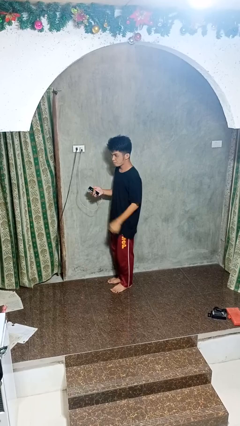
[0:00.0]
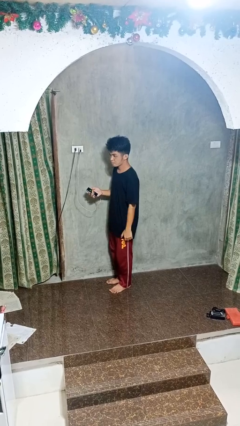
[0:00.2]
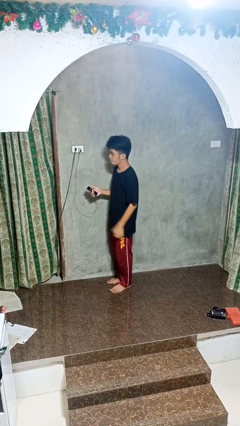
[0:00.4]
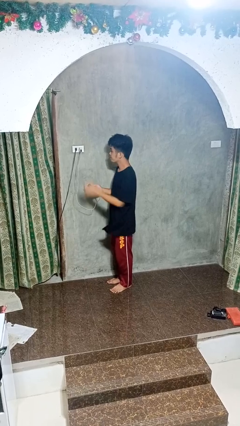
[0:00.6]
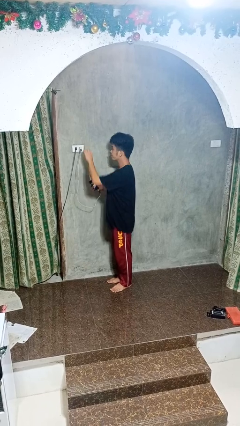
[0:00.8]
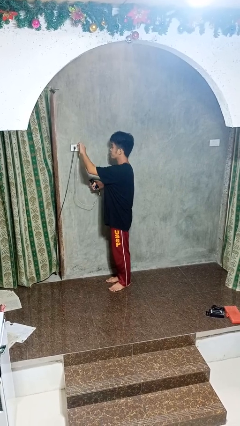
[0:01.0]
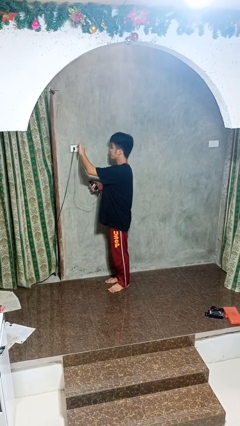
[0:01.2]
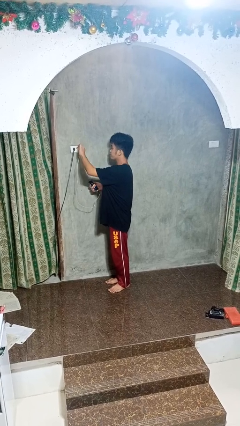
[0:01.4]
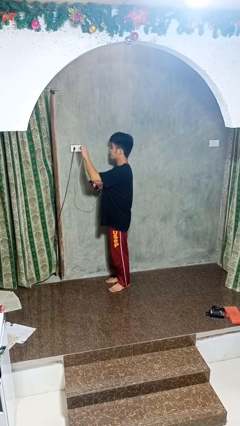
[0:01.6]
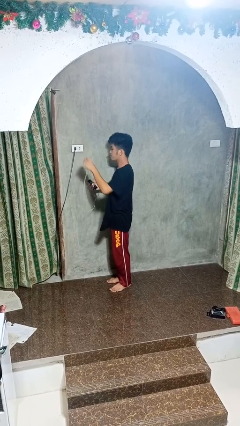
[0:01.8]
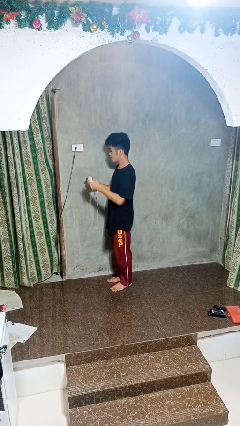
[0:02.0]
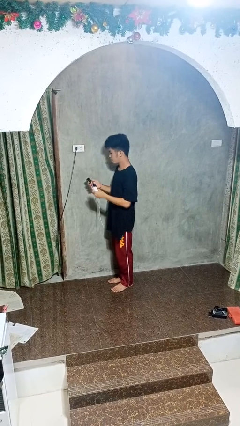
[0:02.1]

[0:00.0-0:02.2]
person unplugs from electrical socket

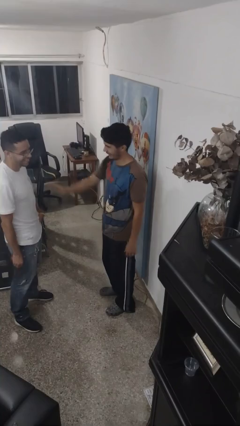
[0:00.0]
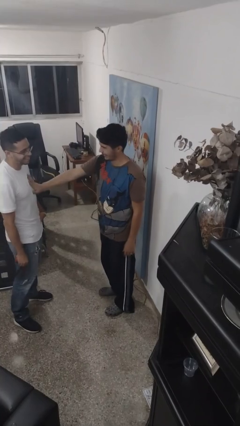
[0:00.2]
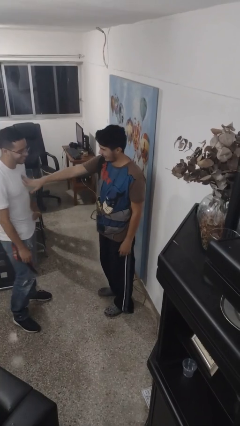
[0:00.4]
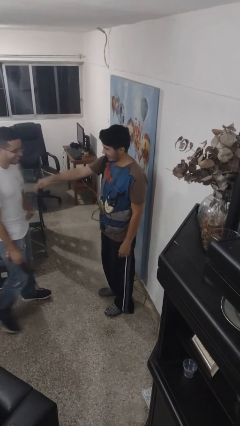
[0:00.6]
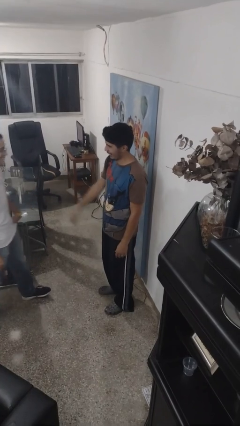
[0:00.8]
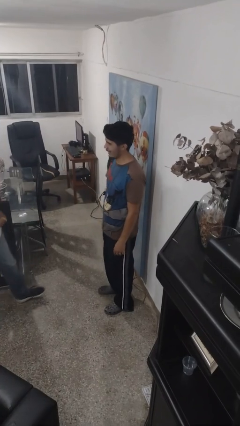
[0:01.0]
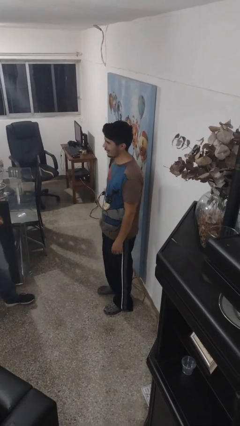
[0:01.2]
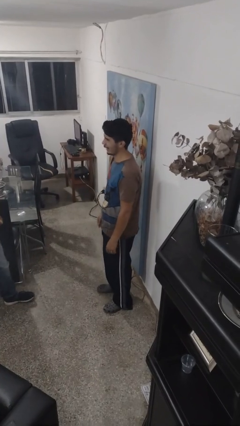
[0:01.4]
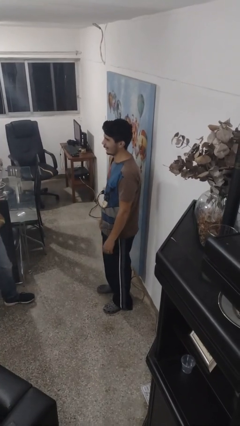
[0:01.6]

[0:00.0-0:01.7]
person shoves person

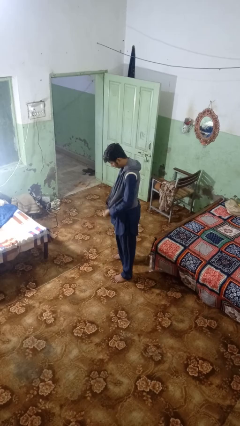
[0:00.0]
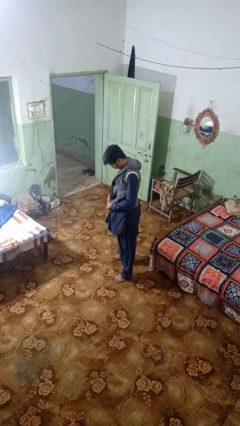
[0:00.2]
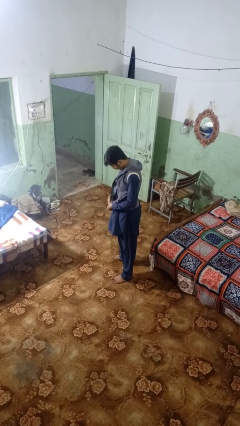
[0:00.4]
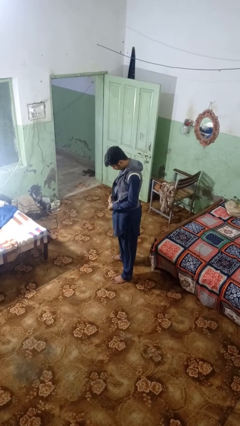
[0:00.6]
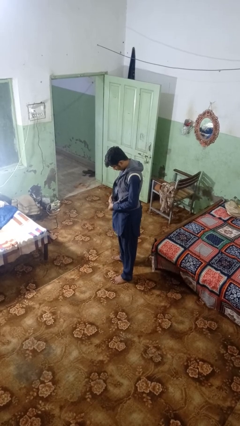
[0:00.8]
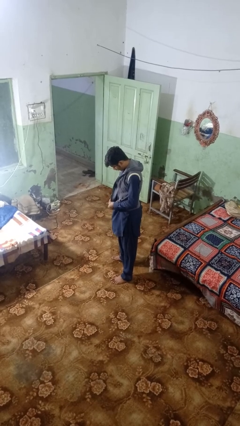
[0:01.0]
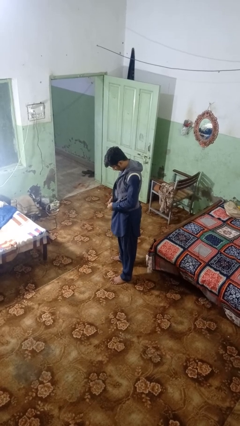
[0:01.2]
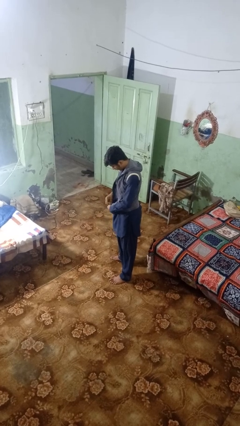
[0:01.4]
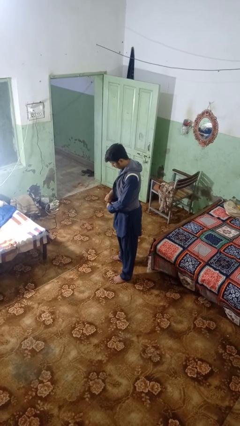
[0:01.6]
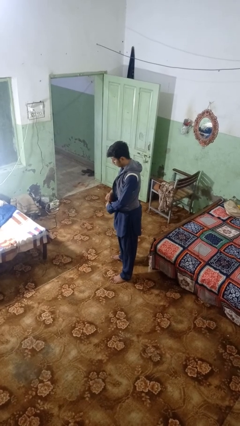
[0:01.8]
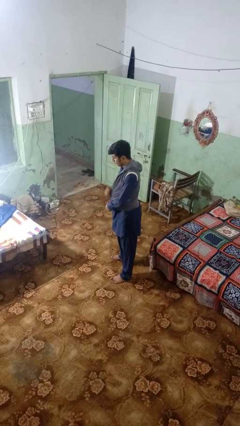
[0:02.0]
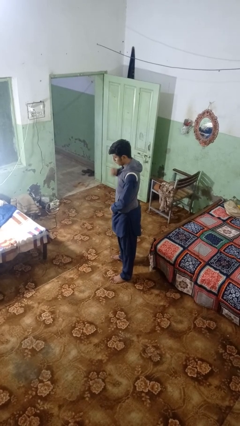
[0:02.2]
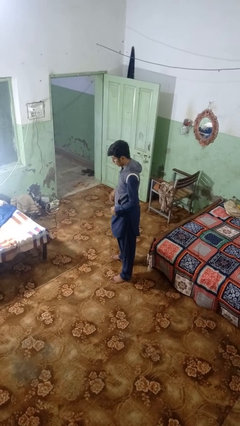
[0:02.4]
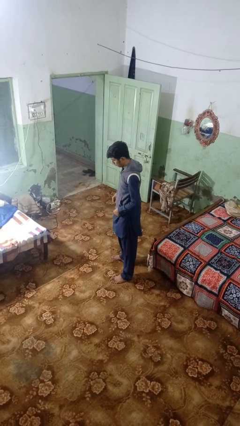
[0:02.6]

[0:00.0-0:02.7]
person zips up jacket

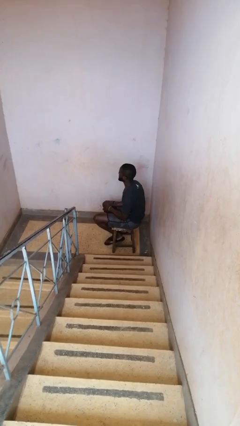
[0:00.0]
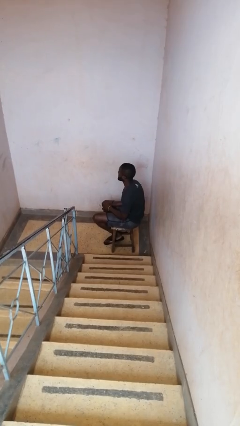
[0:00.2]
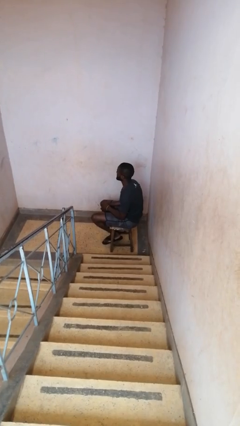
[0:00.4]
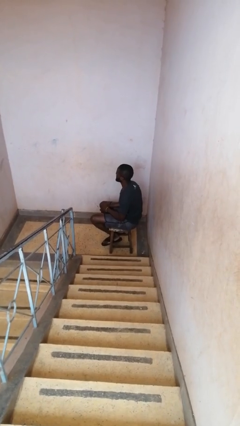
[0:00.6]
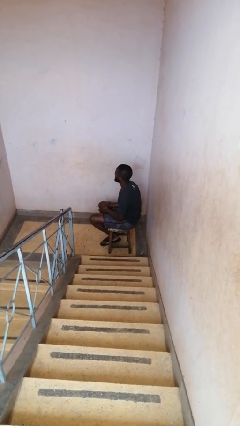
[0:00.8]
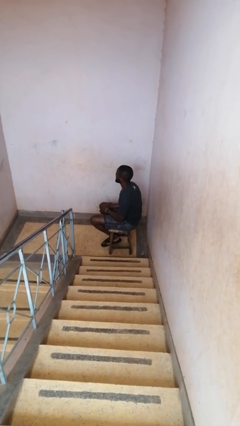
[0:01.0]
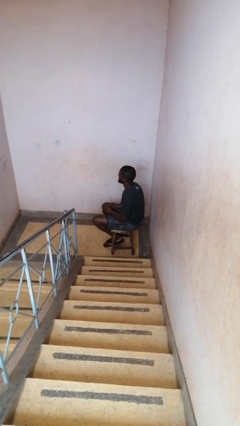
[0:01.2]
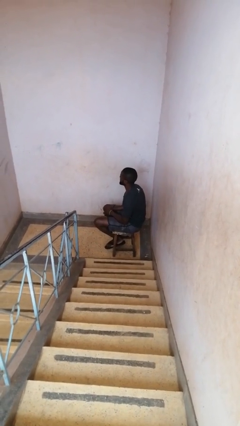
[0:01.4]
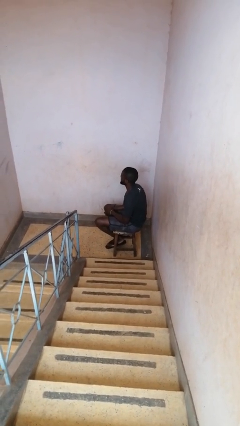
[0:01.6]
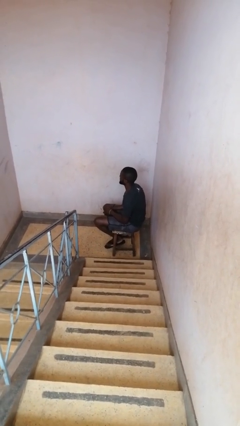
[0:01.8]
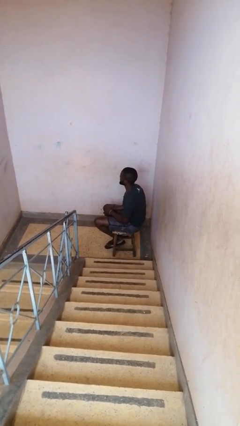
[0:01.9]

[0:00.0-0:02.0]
person strokes chin

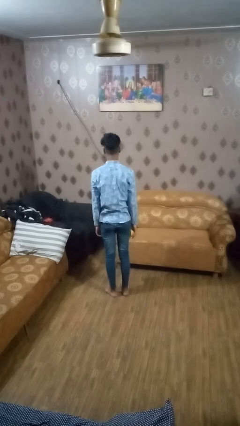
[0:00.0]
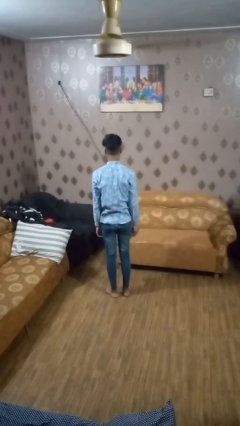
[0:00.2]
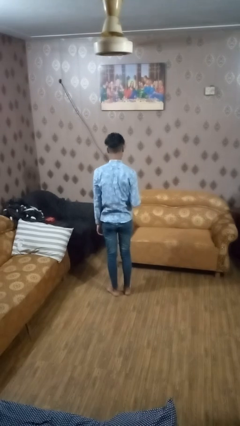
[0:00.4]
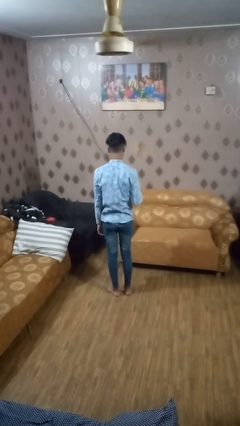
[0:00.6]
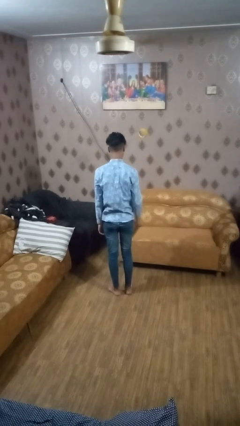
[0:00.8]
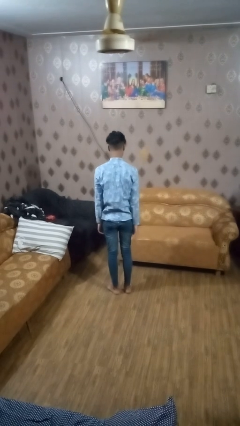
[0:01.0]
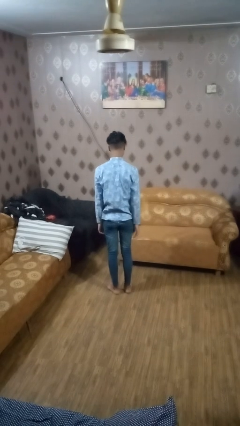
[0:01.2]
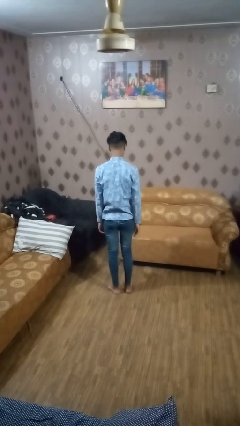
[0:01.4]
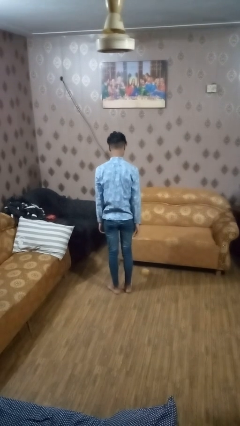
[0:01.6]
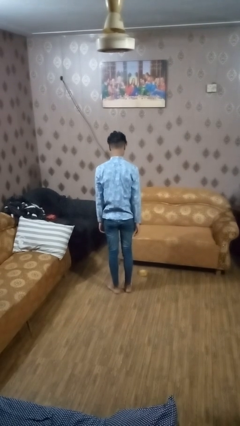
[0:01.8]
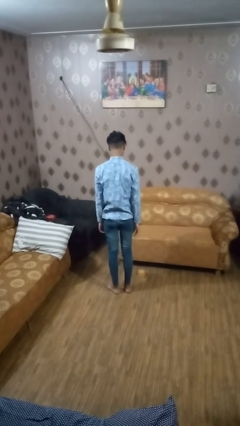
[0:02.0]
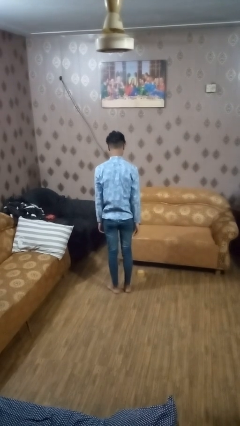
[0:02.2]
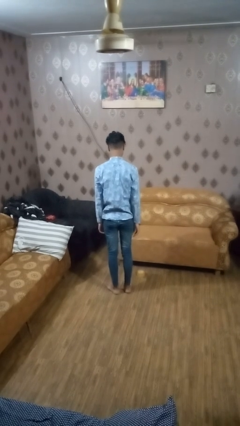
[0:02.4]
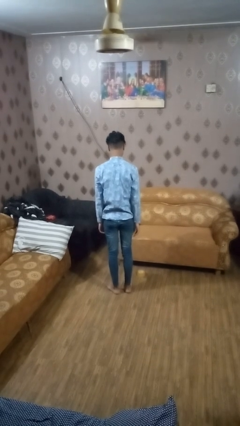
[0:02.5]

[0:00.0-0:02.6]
person throws object into air

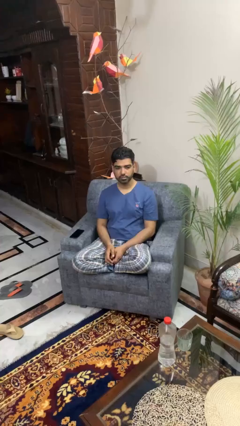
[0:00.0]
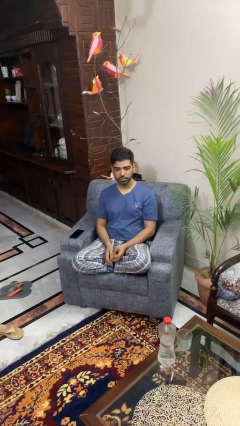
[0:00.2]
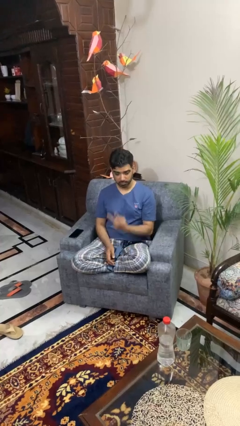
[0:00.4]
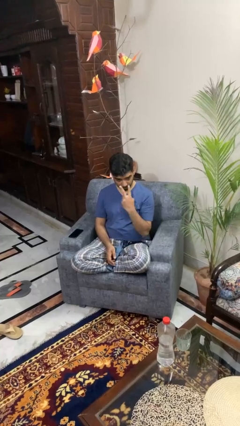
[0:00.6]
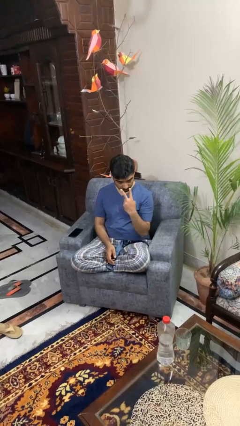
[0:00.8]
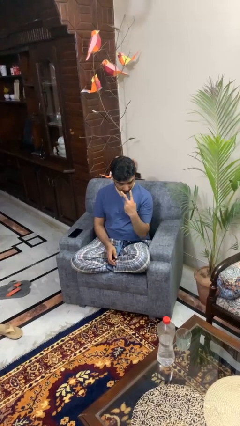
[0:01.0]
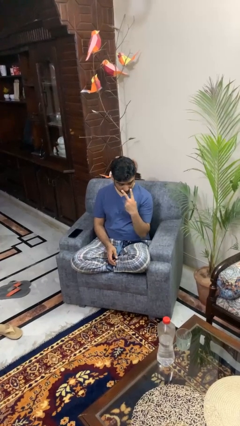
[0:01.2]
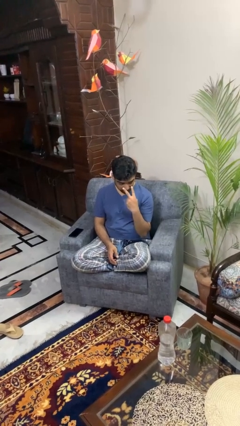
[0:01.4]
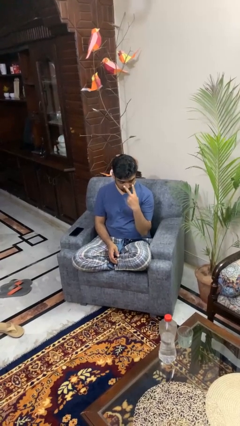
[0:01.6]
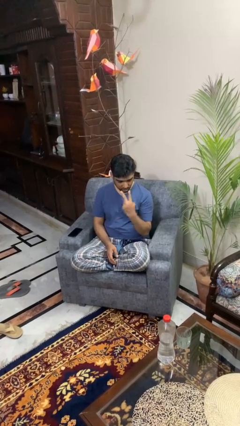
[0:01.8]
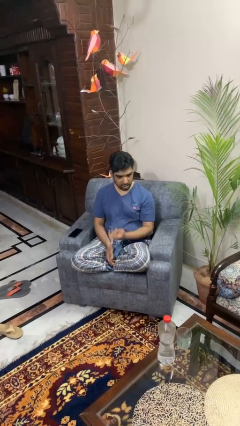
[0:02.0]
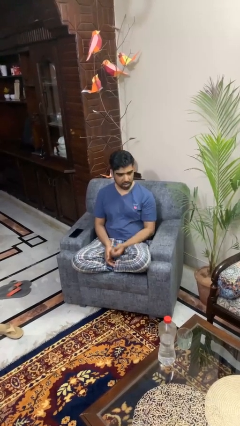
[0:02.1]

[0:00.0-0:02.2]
person gestures watch closely

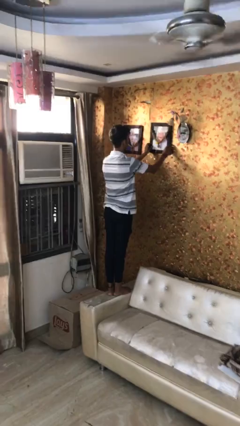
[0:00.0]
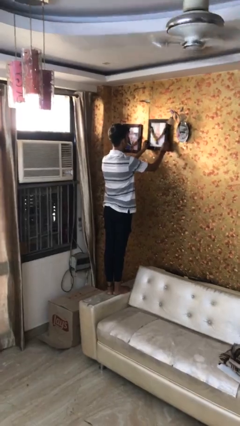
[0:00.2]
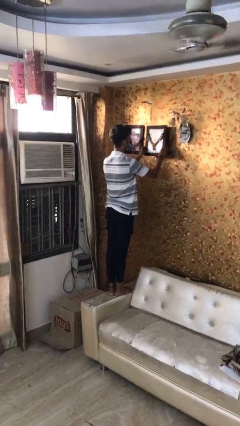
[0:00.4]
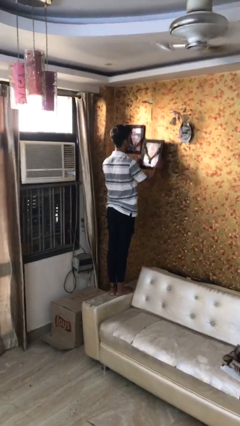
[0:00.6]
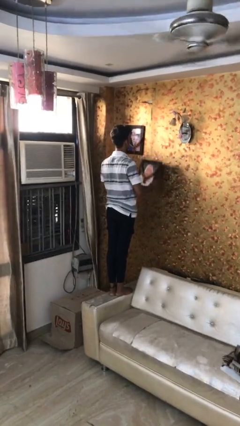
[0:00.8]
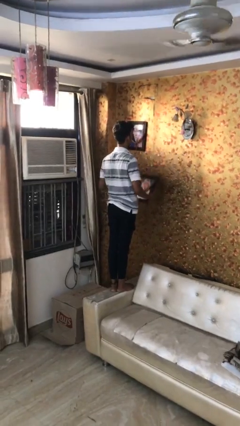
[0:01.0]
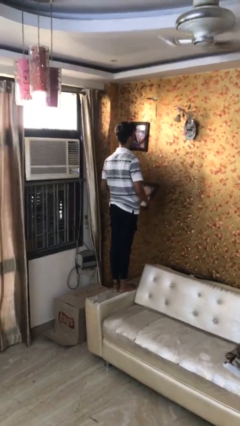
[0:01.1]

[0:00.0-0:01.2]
person takes down picture frame

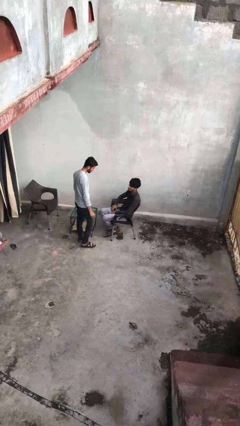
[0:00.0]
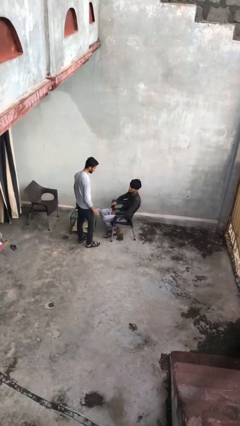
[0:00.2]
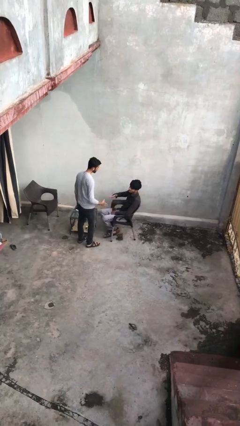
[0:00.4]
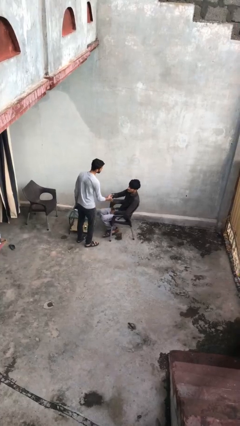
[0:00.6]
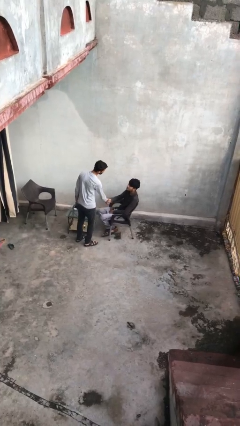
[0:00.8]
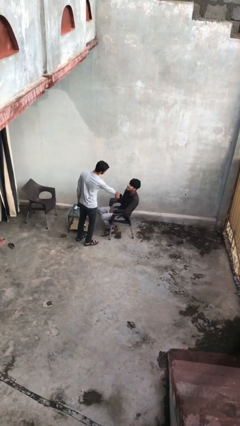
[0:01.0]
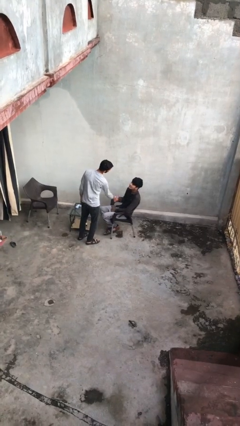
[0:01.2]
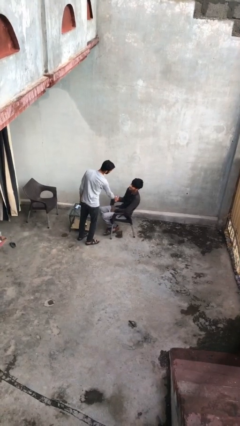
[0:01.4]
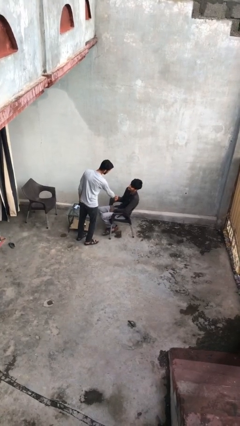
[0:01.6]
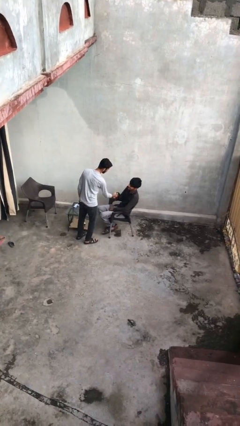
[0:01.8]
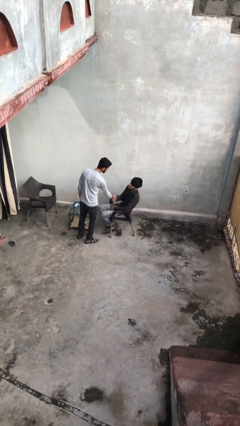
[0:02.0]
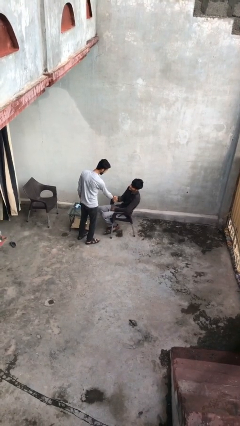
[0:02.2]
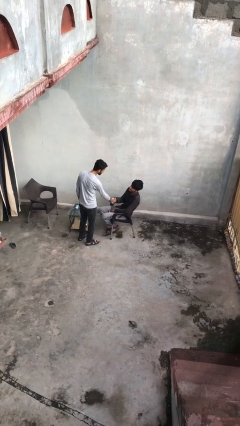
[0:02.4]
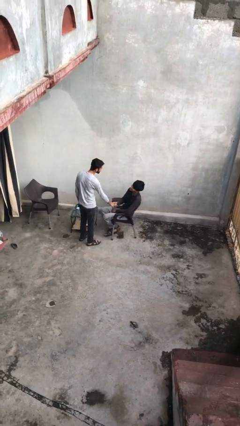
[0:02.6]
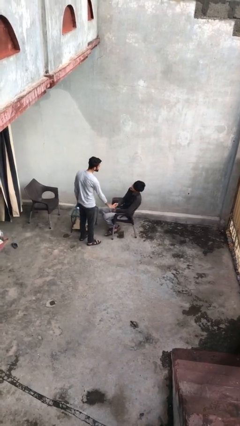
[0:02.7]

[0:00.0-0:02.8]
person shakes hand
